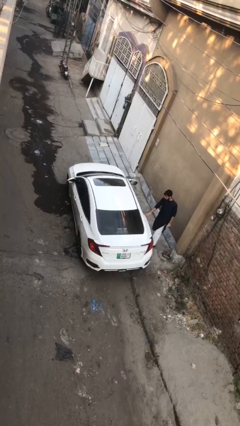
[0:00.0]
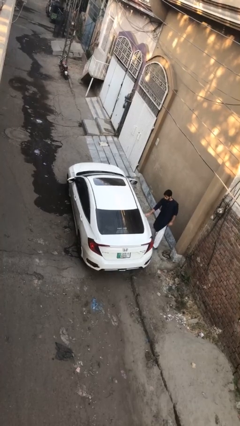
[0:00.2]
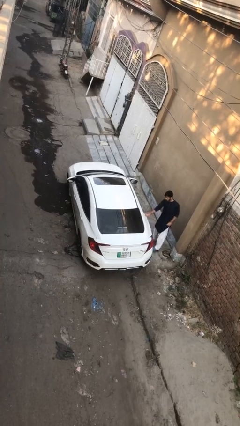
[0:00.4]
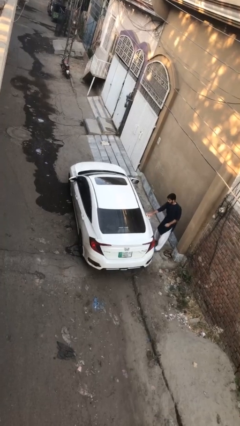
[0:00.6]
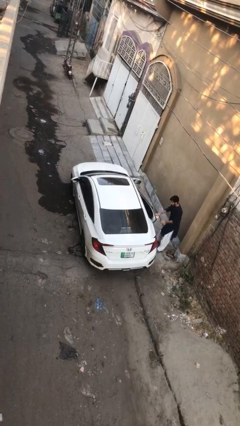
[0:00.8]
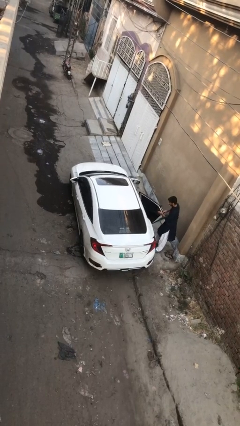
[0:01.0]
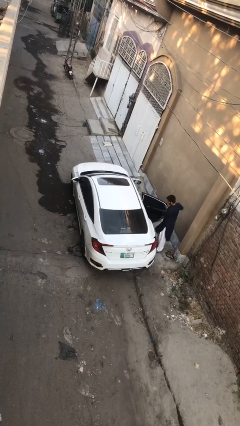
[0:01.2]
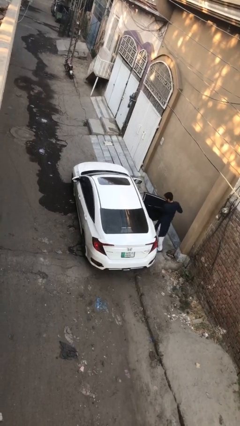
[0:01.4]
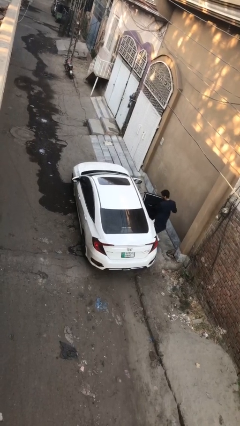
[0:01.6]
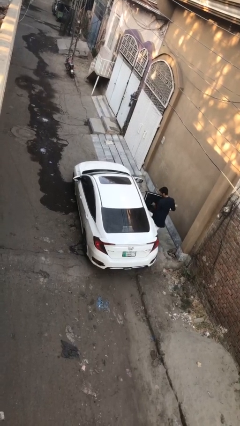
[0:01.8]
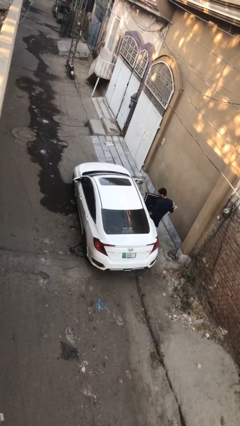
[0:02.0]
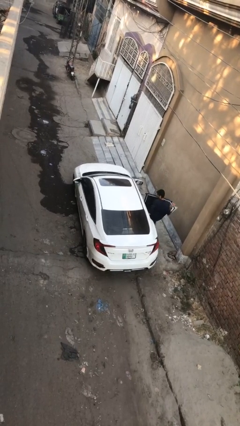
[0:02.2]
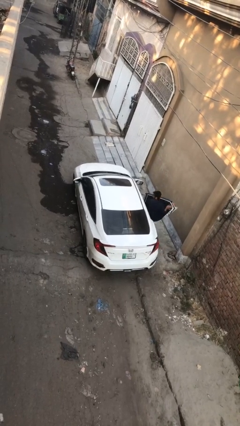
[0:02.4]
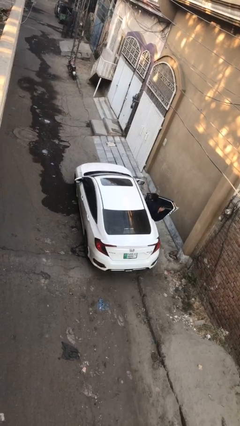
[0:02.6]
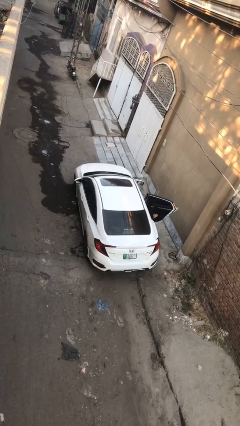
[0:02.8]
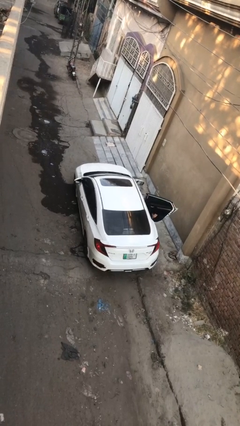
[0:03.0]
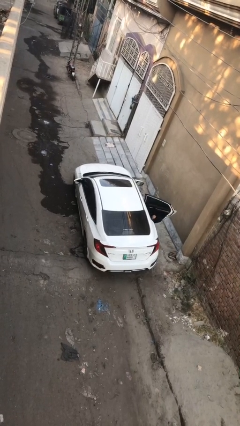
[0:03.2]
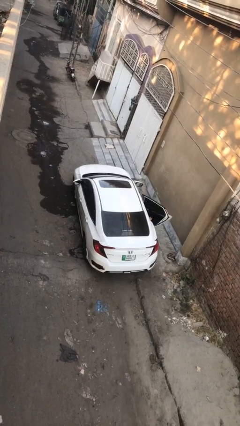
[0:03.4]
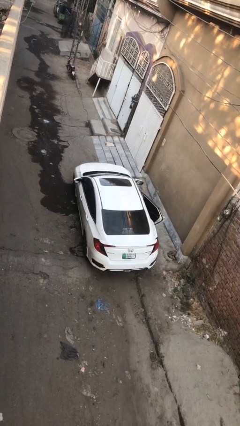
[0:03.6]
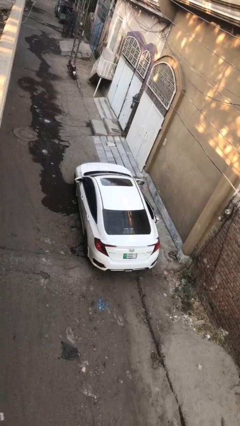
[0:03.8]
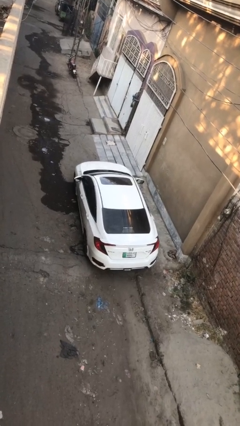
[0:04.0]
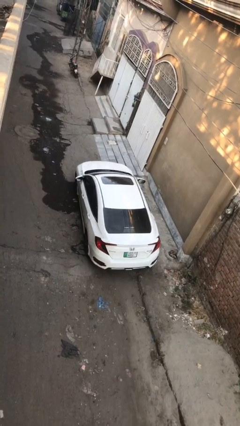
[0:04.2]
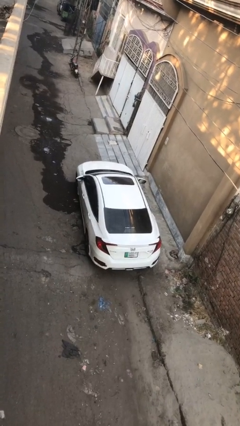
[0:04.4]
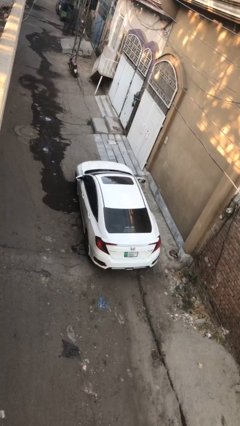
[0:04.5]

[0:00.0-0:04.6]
car picks up person

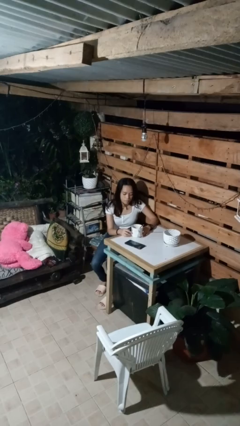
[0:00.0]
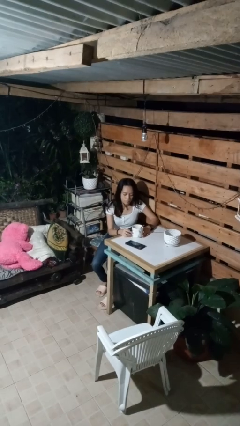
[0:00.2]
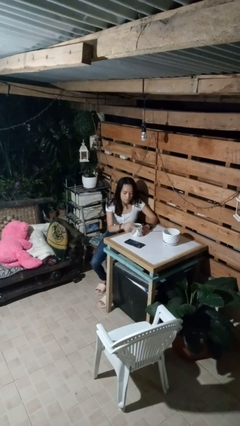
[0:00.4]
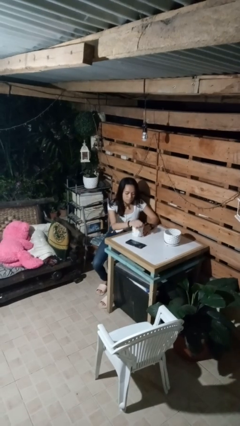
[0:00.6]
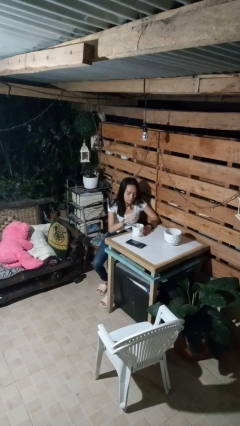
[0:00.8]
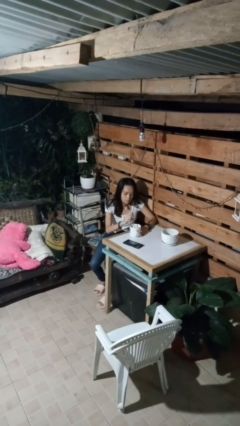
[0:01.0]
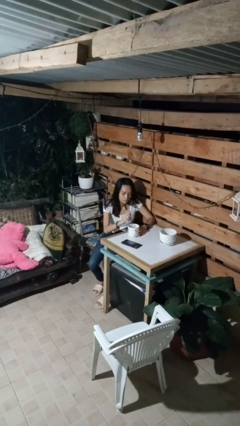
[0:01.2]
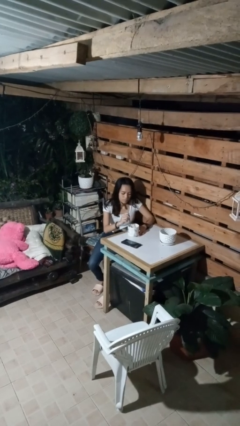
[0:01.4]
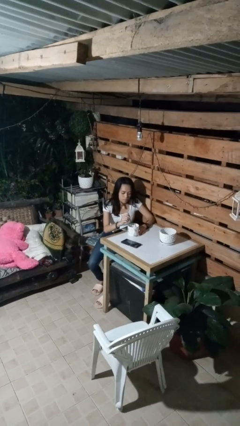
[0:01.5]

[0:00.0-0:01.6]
person stirs mug

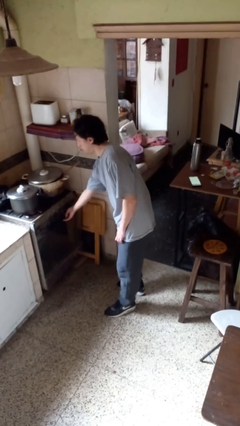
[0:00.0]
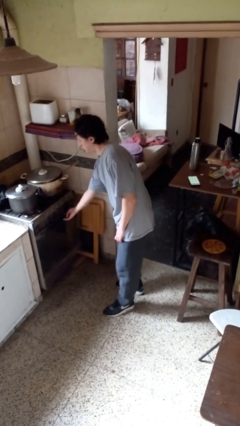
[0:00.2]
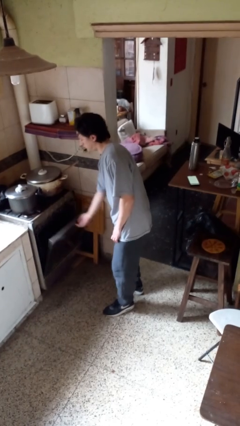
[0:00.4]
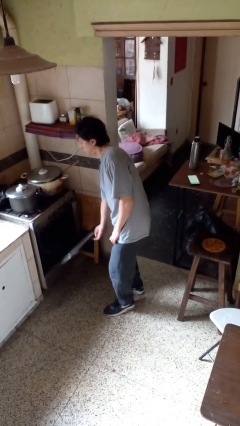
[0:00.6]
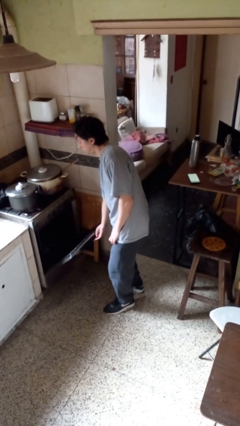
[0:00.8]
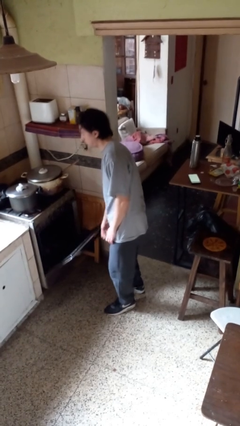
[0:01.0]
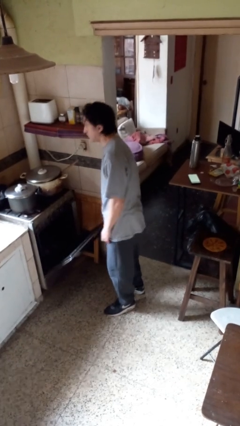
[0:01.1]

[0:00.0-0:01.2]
person opens oven door

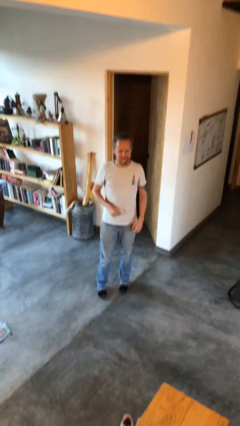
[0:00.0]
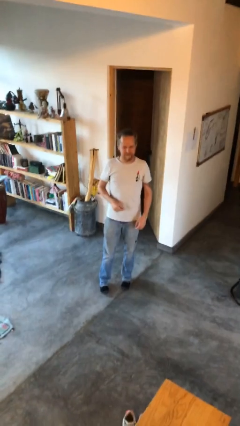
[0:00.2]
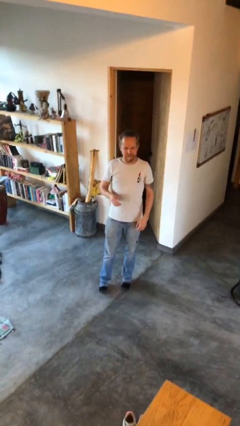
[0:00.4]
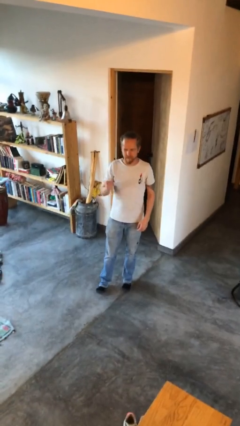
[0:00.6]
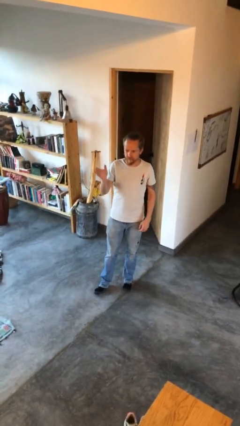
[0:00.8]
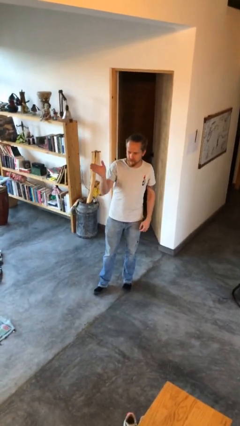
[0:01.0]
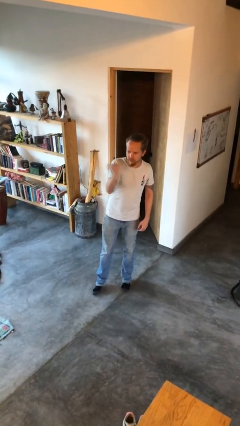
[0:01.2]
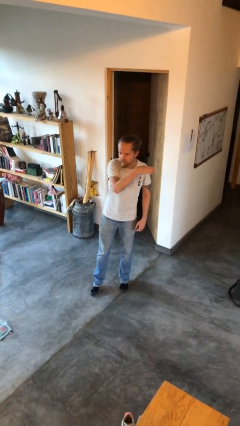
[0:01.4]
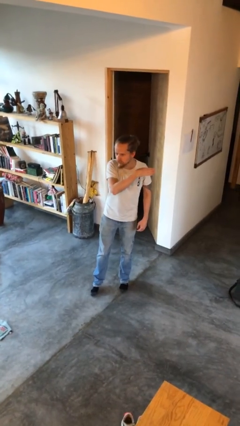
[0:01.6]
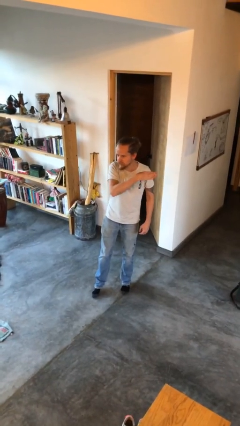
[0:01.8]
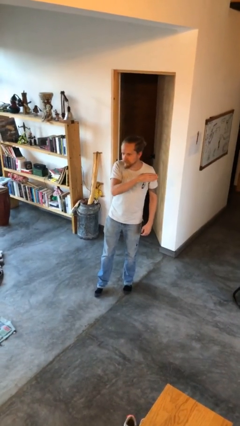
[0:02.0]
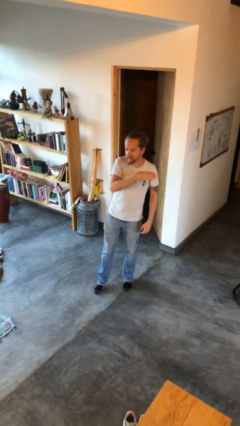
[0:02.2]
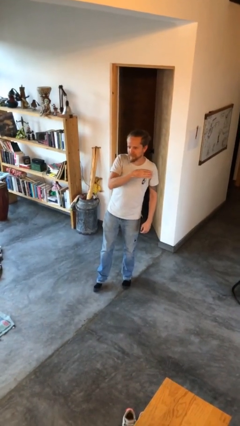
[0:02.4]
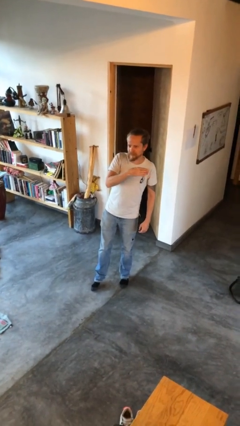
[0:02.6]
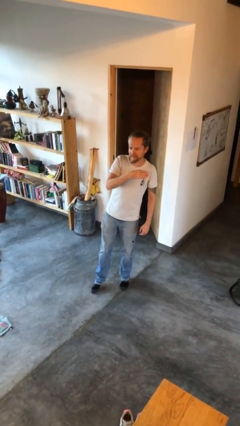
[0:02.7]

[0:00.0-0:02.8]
person gestures swipe left

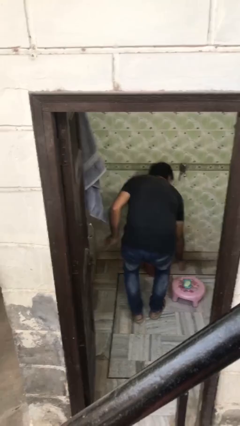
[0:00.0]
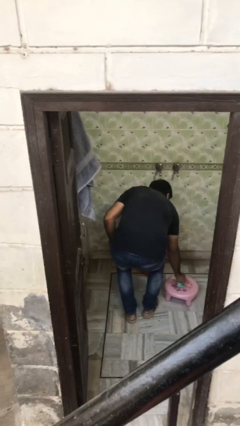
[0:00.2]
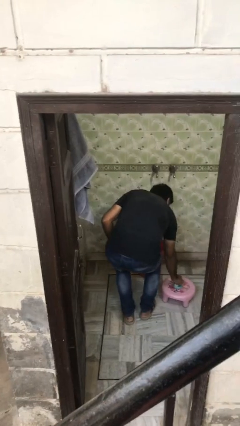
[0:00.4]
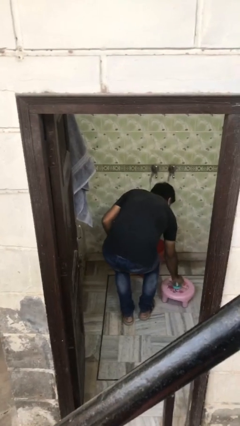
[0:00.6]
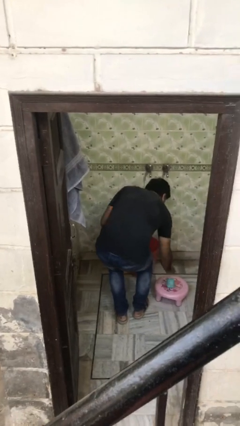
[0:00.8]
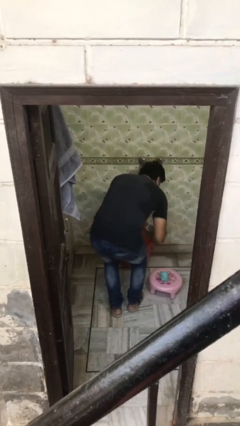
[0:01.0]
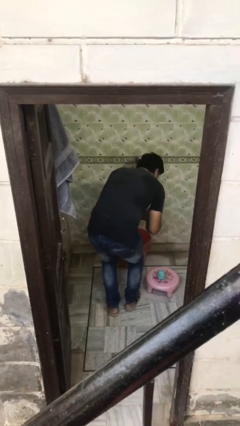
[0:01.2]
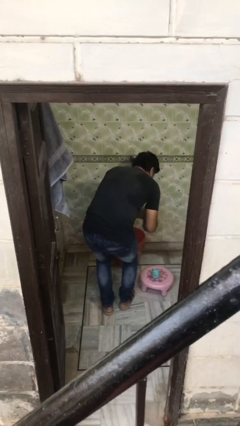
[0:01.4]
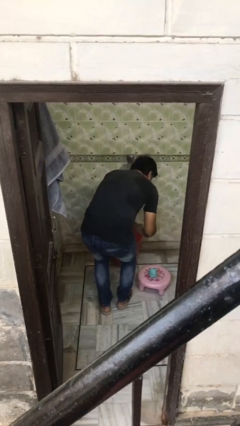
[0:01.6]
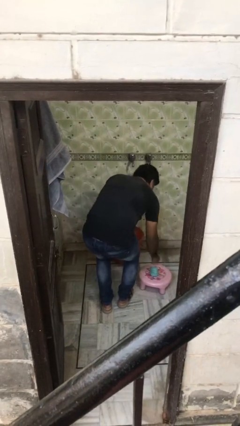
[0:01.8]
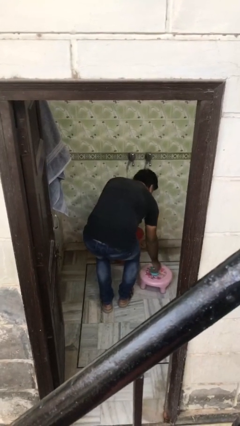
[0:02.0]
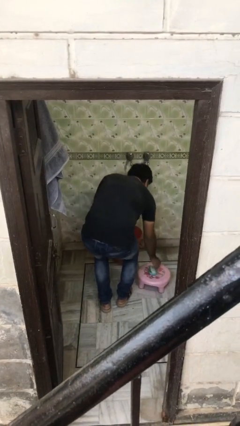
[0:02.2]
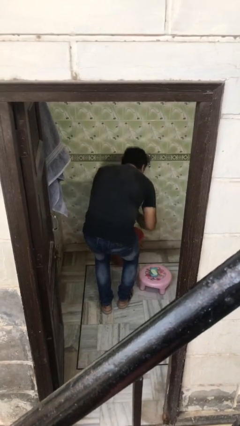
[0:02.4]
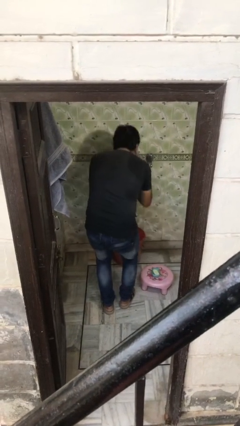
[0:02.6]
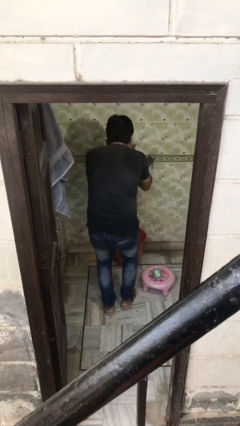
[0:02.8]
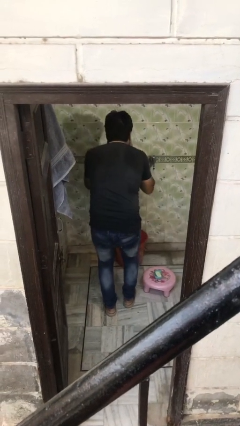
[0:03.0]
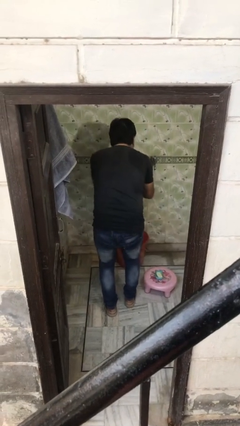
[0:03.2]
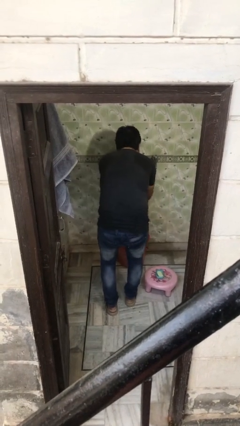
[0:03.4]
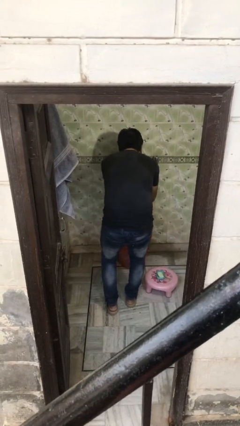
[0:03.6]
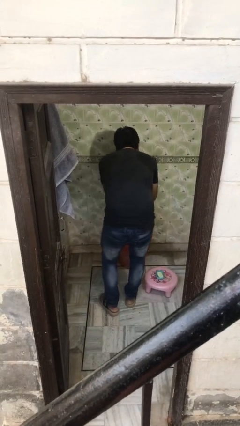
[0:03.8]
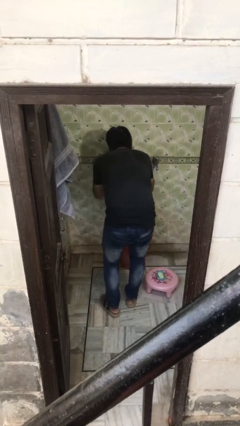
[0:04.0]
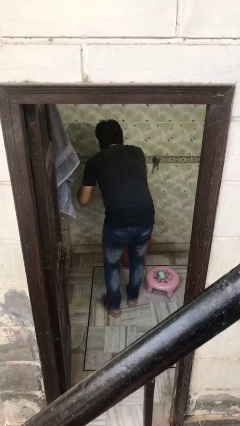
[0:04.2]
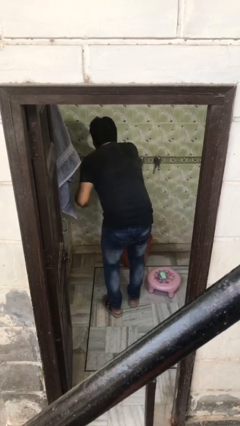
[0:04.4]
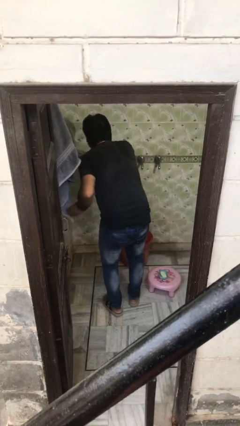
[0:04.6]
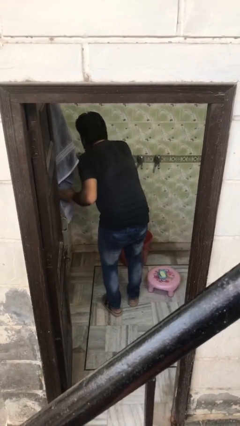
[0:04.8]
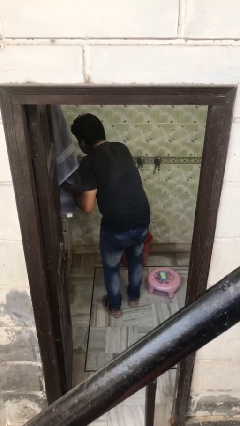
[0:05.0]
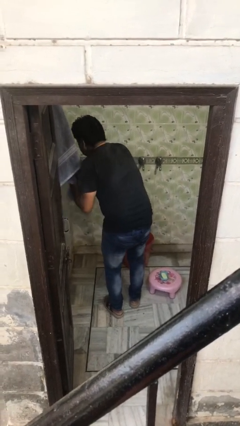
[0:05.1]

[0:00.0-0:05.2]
person washes face

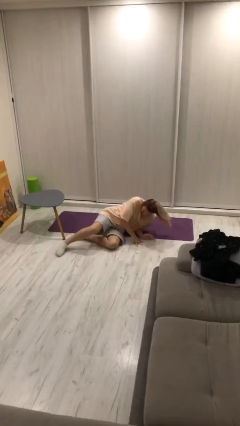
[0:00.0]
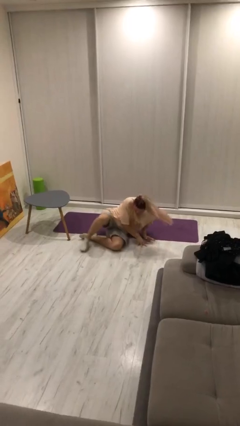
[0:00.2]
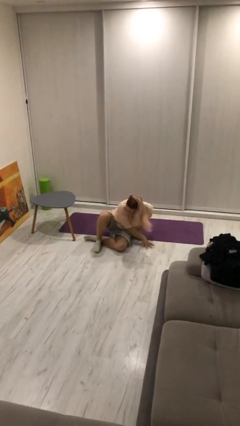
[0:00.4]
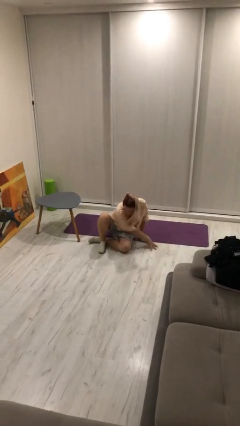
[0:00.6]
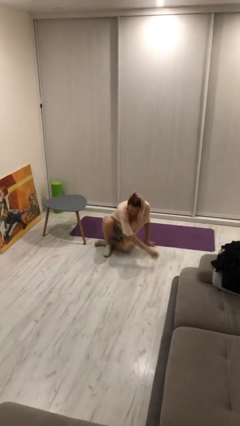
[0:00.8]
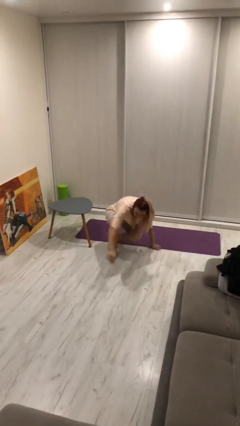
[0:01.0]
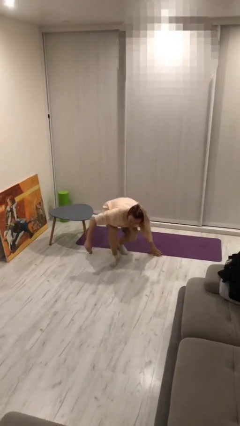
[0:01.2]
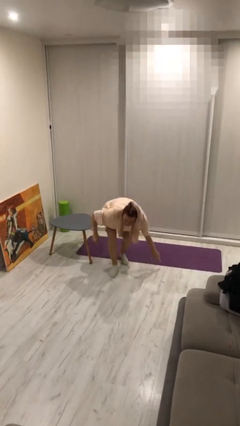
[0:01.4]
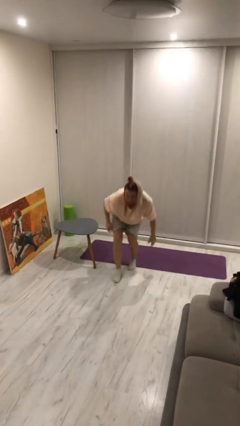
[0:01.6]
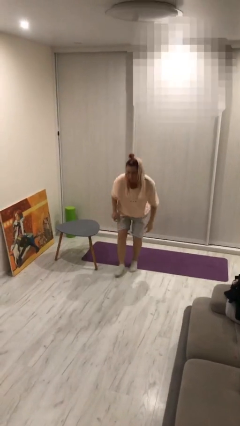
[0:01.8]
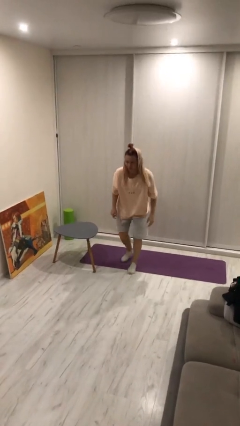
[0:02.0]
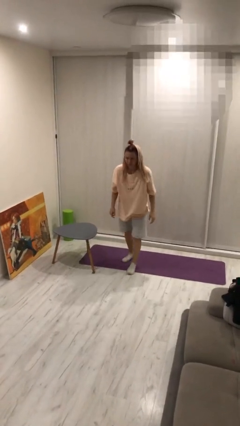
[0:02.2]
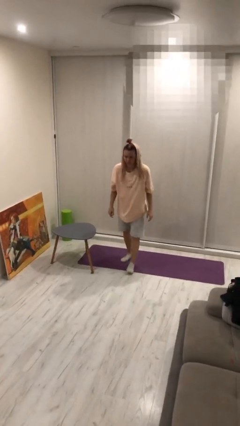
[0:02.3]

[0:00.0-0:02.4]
person stands up from floor
